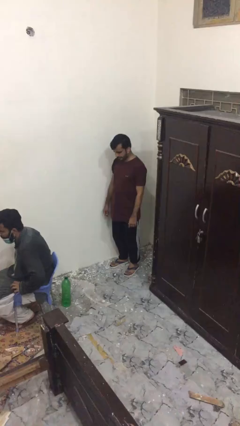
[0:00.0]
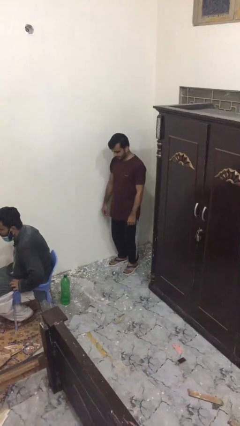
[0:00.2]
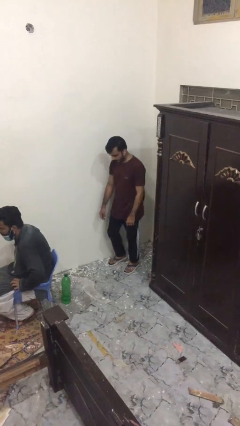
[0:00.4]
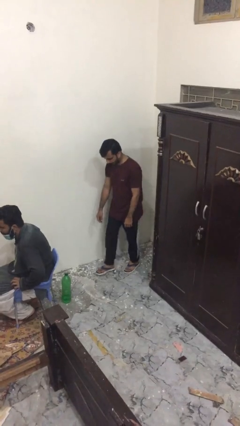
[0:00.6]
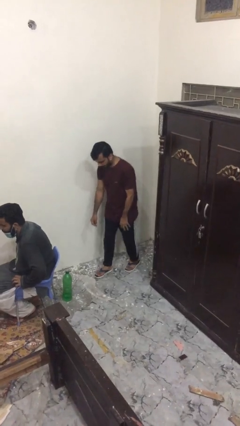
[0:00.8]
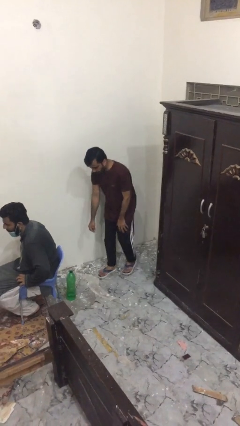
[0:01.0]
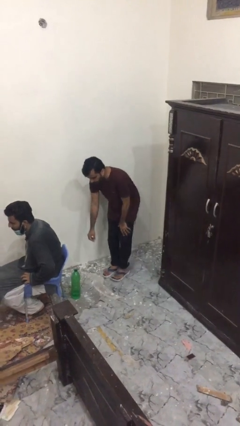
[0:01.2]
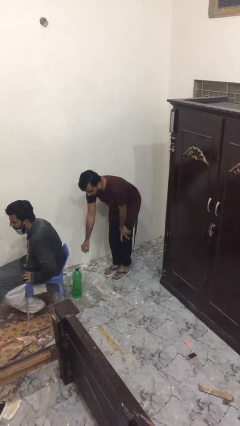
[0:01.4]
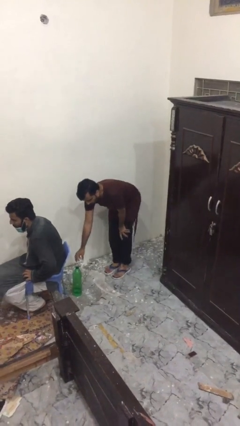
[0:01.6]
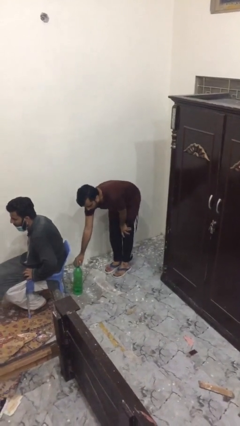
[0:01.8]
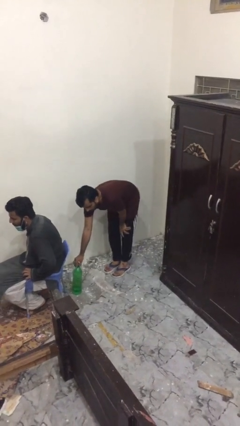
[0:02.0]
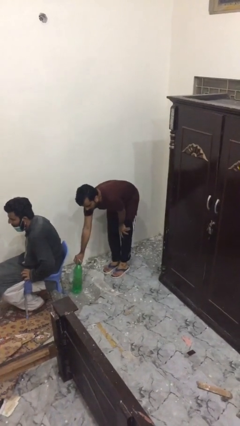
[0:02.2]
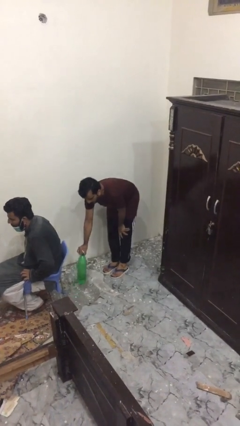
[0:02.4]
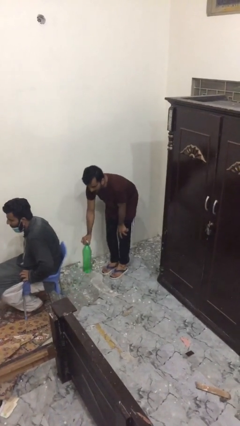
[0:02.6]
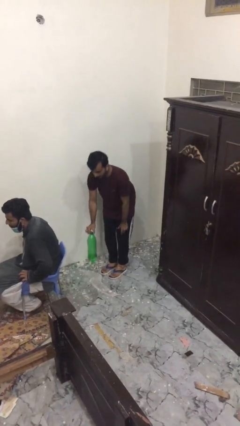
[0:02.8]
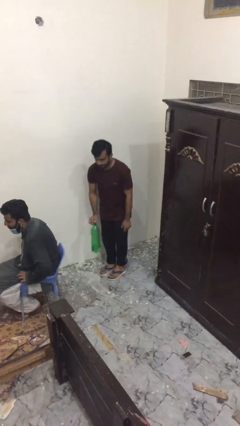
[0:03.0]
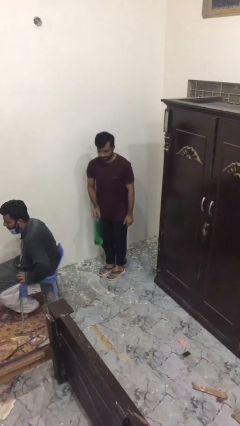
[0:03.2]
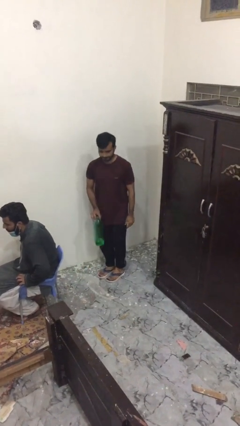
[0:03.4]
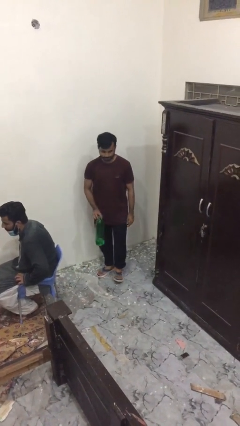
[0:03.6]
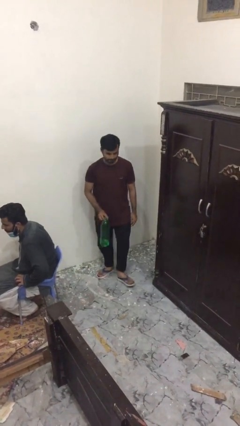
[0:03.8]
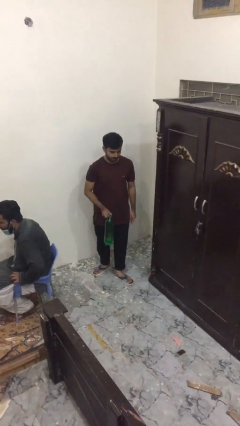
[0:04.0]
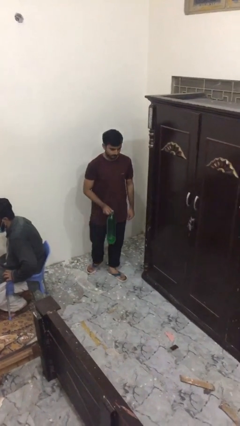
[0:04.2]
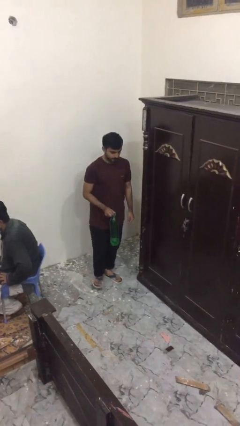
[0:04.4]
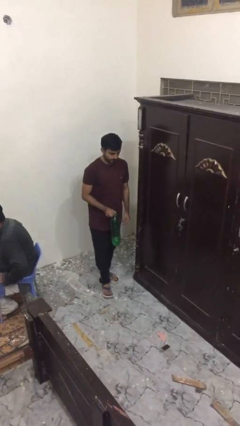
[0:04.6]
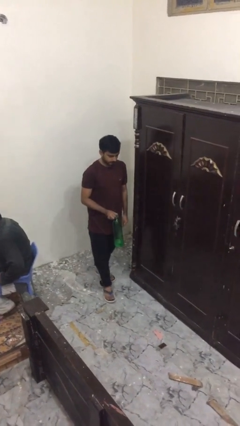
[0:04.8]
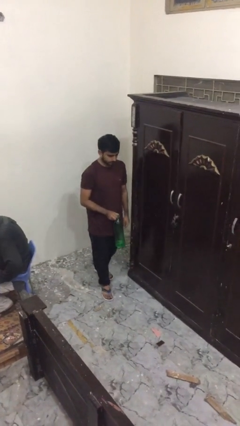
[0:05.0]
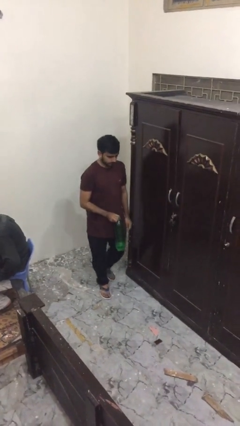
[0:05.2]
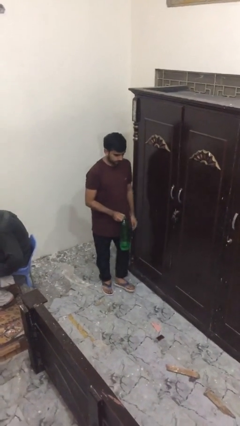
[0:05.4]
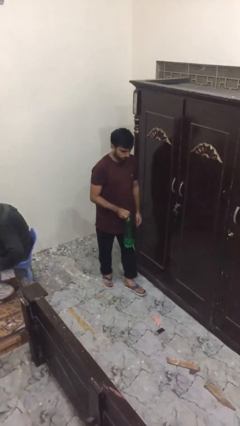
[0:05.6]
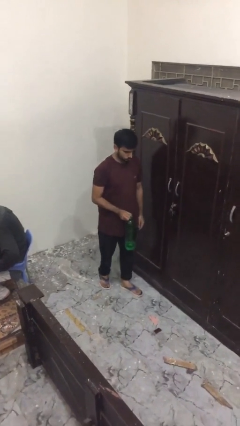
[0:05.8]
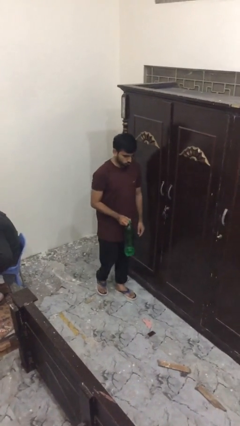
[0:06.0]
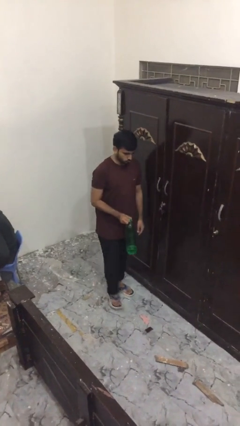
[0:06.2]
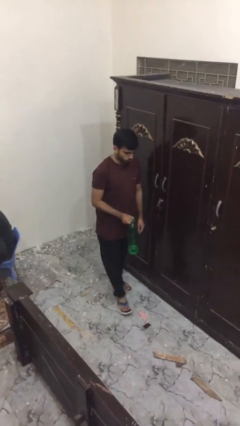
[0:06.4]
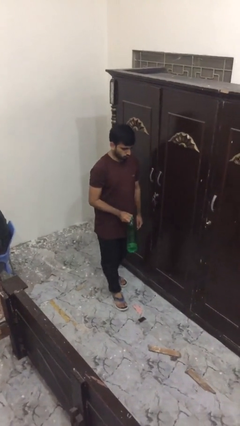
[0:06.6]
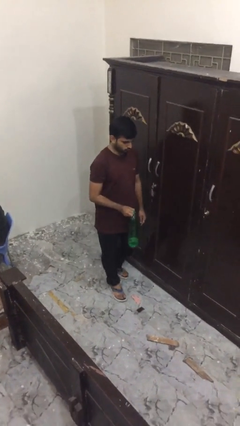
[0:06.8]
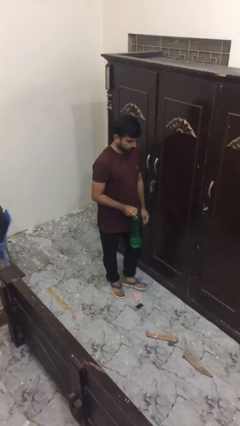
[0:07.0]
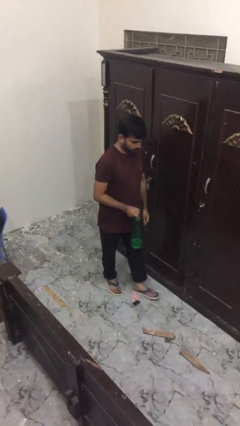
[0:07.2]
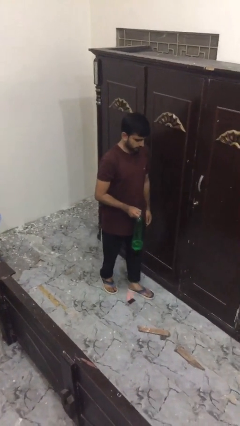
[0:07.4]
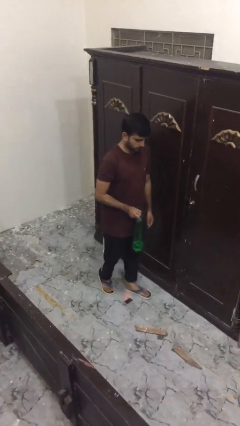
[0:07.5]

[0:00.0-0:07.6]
person steals object from person

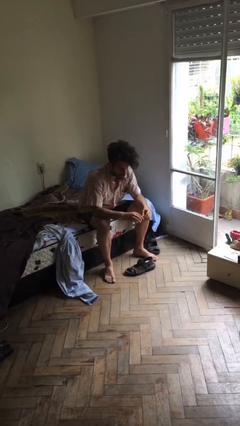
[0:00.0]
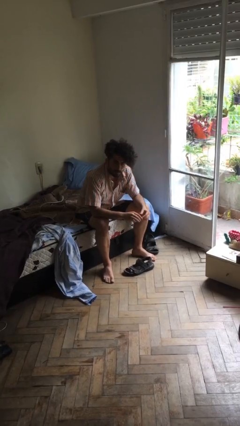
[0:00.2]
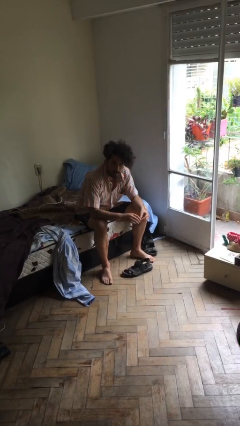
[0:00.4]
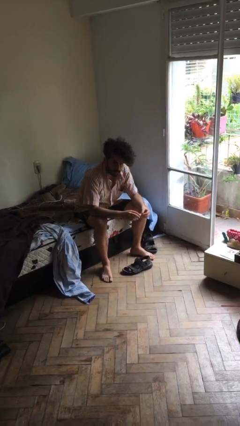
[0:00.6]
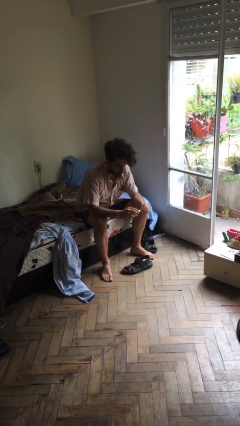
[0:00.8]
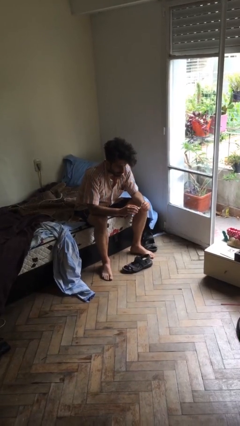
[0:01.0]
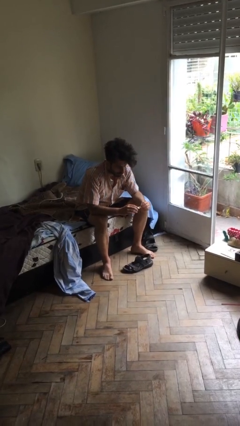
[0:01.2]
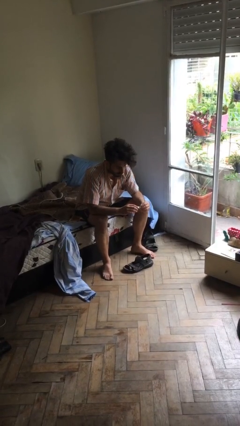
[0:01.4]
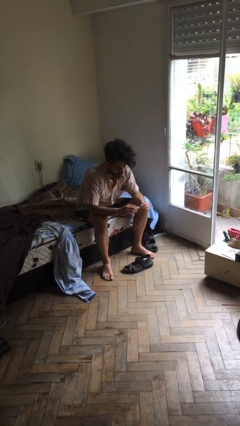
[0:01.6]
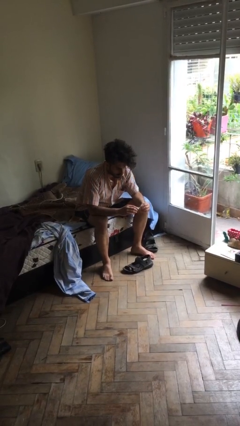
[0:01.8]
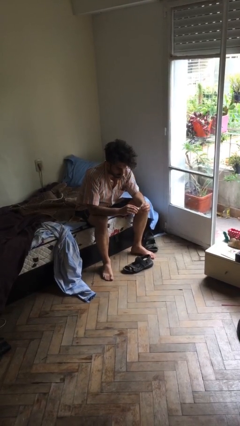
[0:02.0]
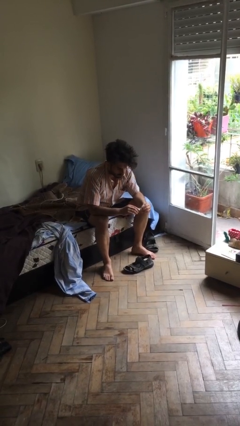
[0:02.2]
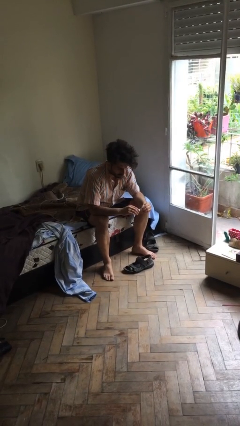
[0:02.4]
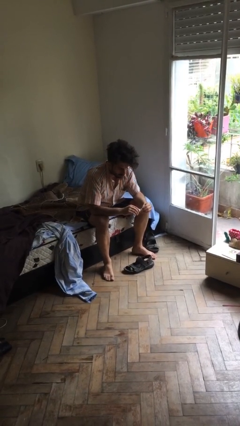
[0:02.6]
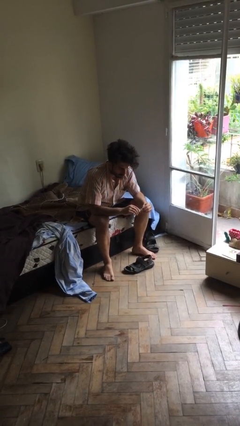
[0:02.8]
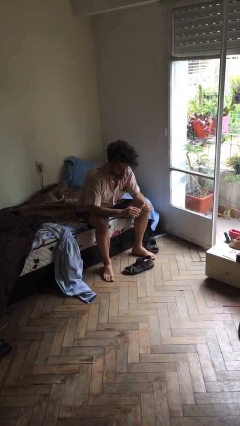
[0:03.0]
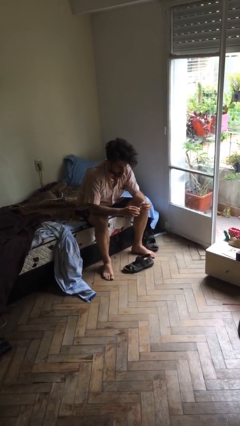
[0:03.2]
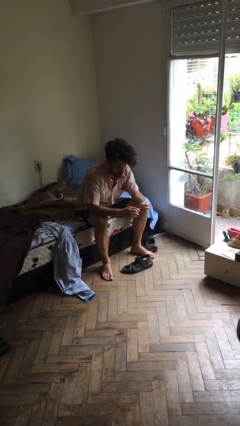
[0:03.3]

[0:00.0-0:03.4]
person clips fingernails

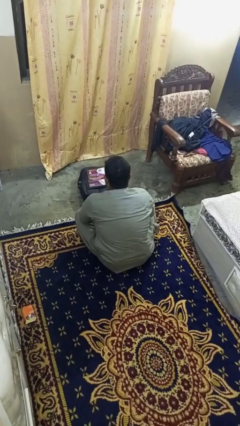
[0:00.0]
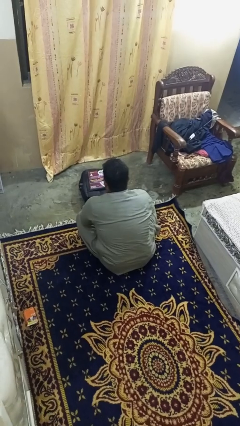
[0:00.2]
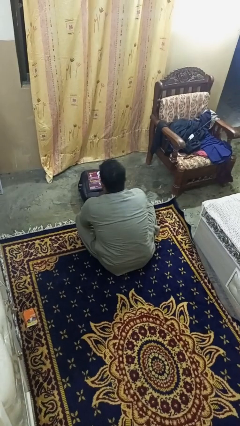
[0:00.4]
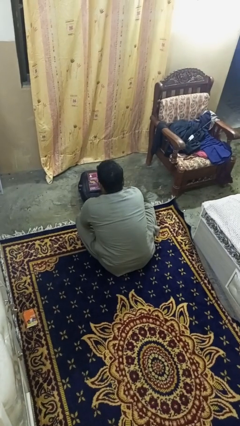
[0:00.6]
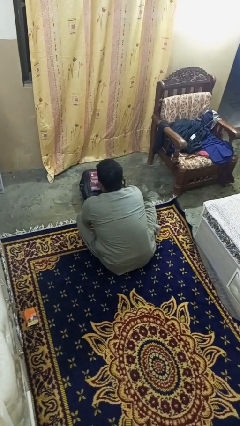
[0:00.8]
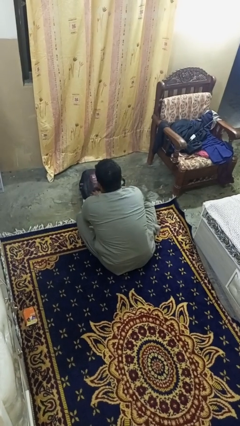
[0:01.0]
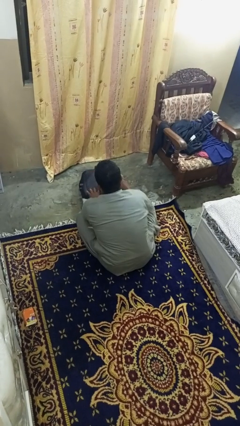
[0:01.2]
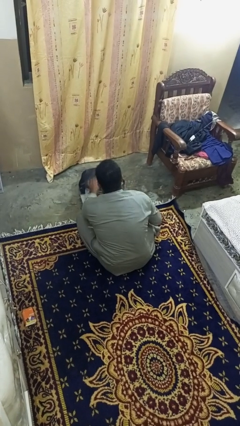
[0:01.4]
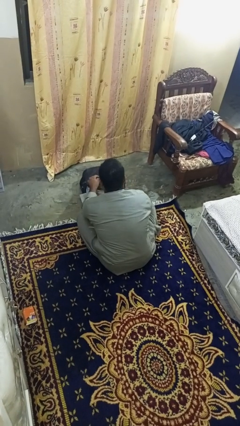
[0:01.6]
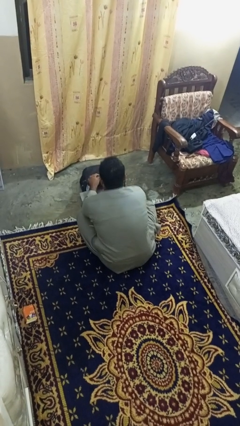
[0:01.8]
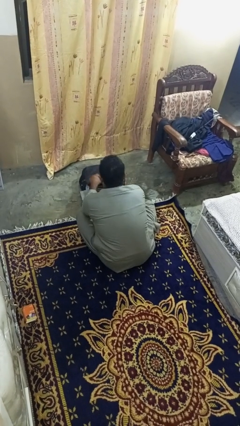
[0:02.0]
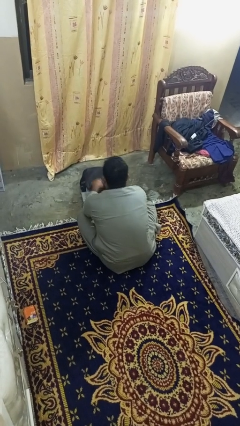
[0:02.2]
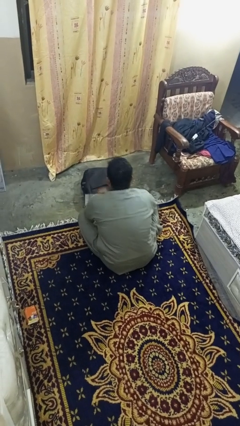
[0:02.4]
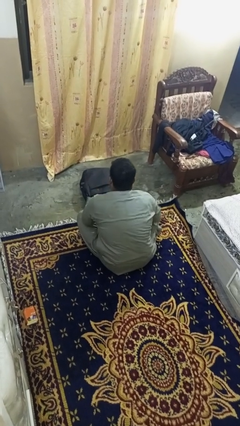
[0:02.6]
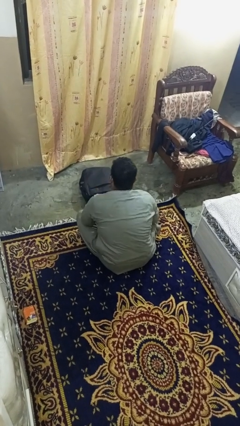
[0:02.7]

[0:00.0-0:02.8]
person puts object into bag

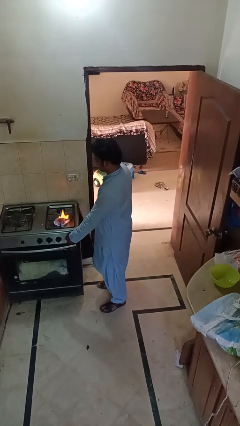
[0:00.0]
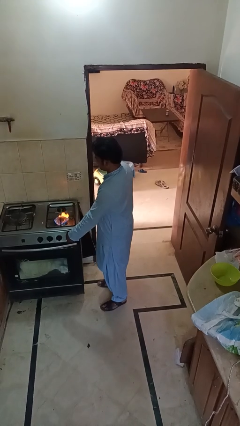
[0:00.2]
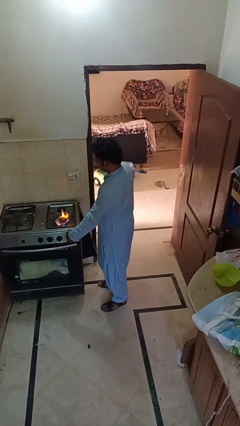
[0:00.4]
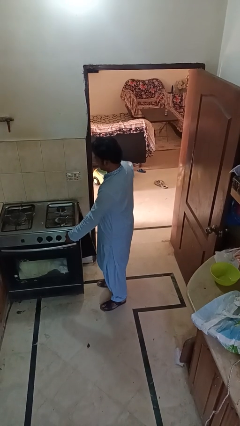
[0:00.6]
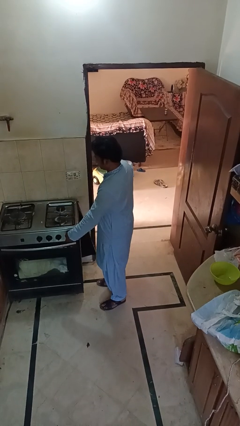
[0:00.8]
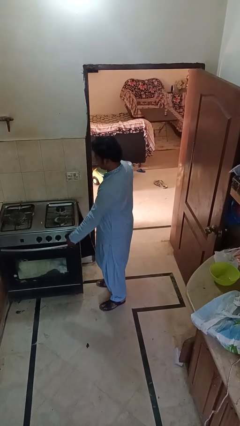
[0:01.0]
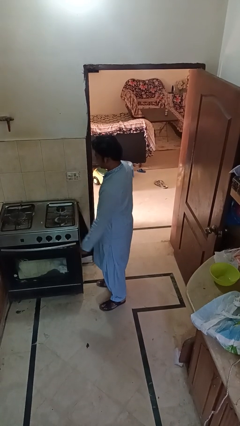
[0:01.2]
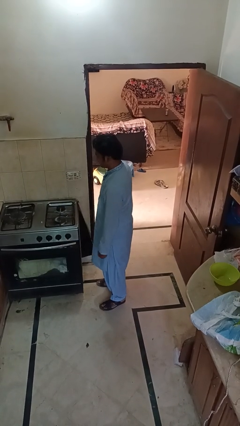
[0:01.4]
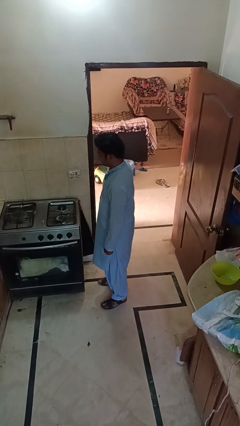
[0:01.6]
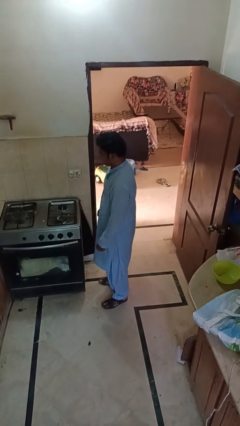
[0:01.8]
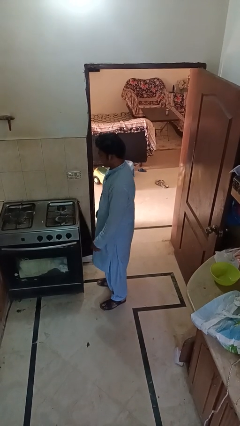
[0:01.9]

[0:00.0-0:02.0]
person turns off stovetop

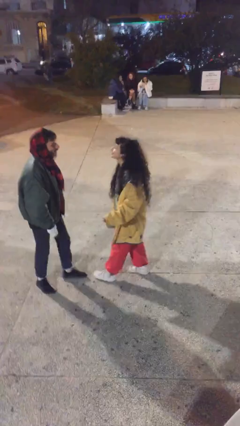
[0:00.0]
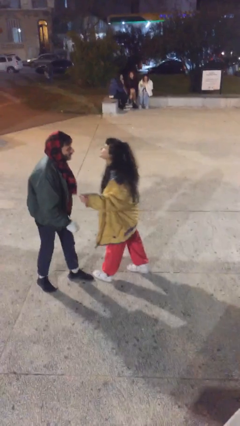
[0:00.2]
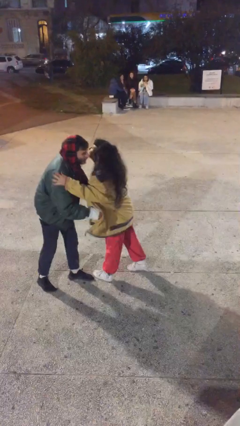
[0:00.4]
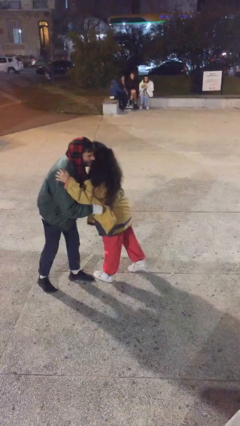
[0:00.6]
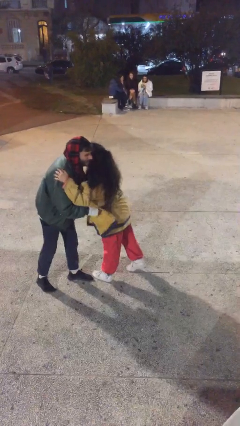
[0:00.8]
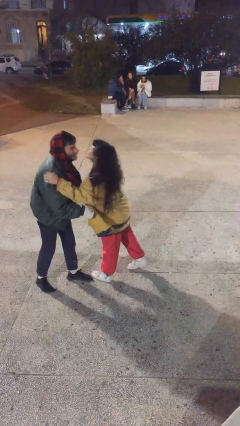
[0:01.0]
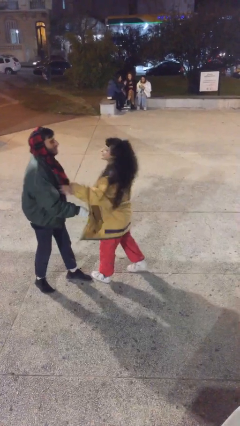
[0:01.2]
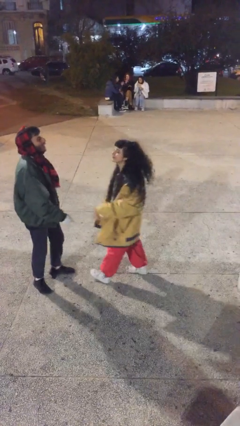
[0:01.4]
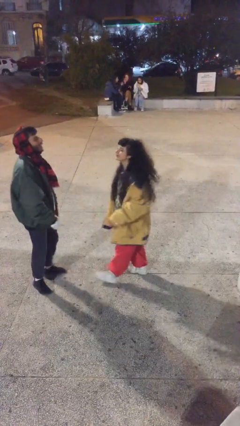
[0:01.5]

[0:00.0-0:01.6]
person kisses cheek of person
